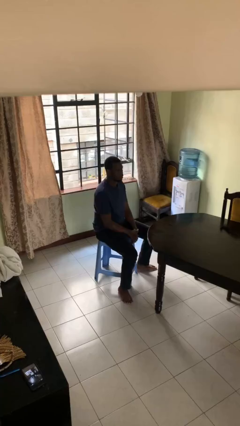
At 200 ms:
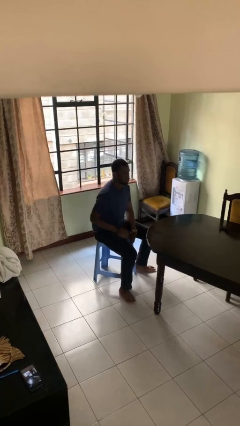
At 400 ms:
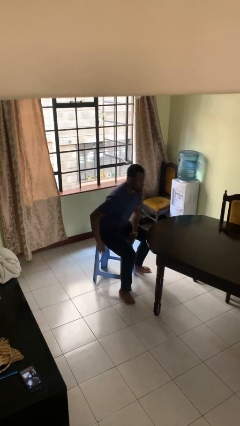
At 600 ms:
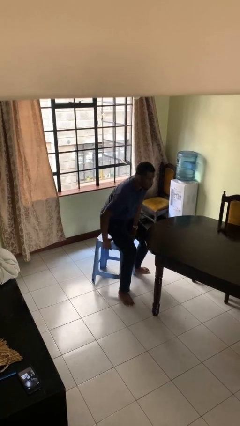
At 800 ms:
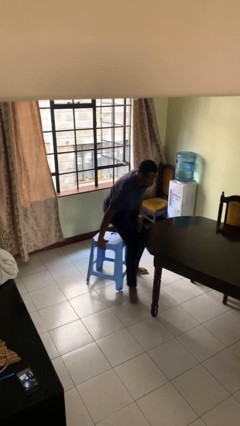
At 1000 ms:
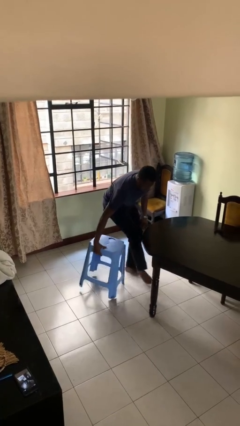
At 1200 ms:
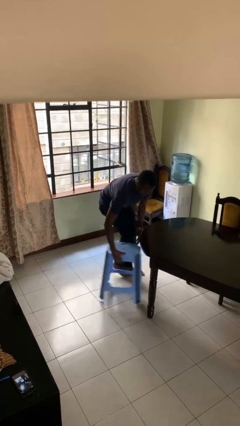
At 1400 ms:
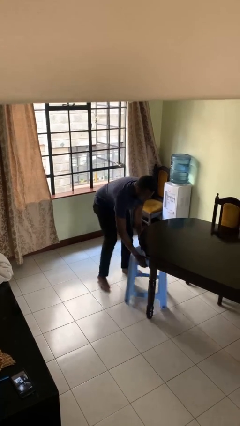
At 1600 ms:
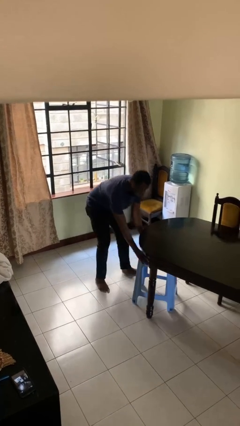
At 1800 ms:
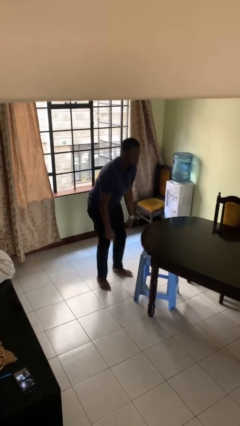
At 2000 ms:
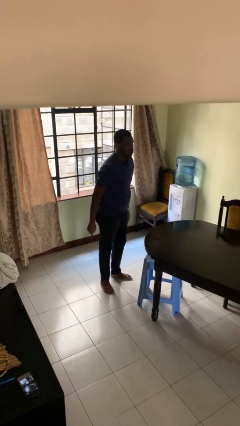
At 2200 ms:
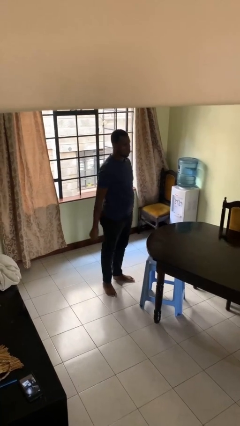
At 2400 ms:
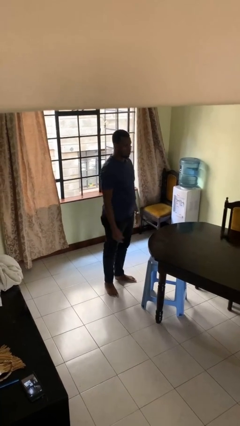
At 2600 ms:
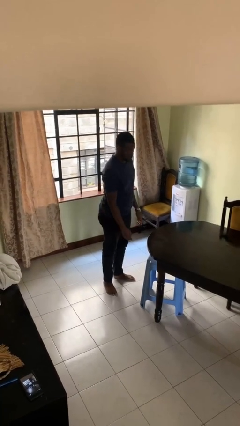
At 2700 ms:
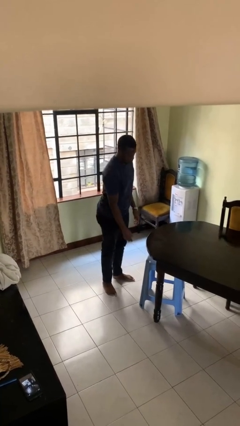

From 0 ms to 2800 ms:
person stands up

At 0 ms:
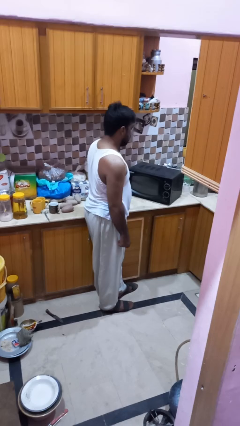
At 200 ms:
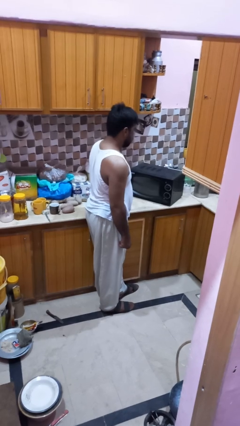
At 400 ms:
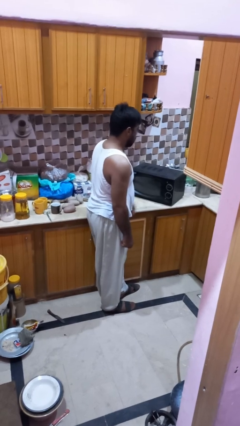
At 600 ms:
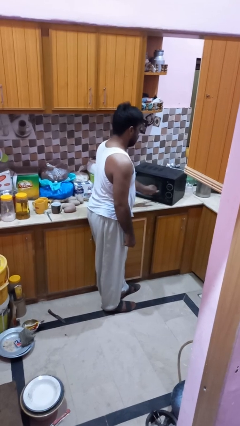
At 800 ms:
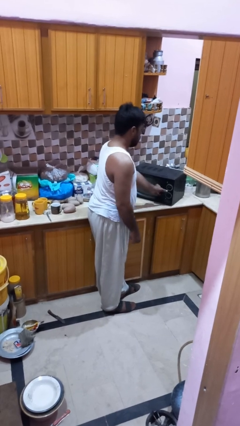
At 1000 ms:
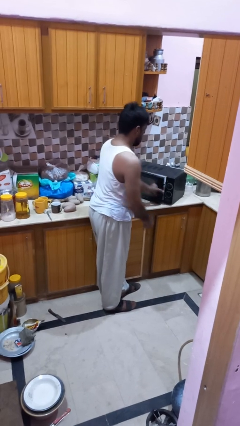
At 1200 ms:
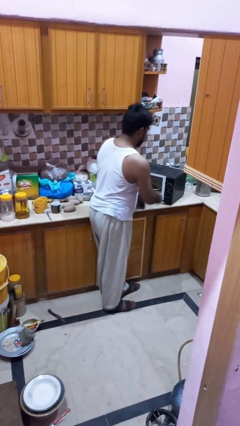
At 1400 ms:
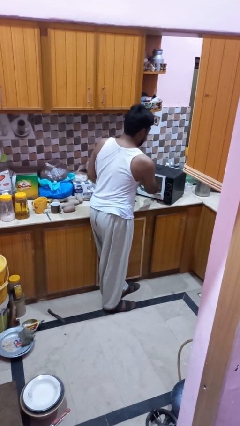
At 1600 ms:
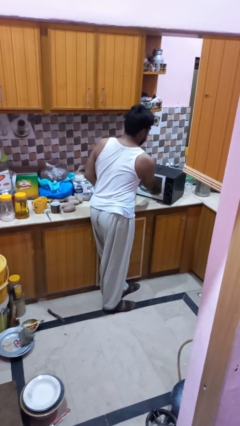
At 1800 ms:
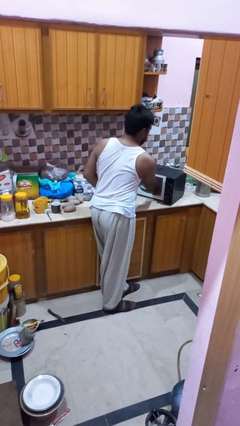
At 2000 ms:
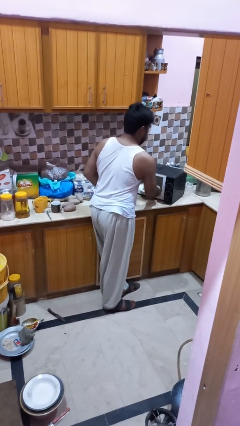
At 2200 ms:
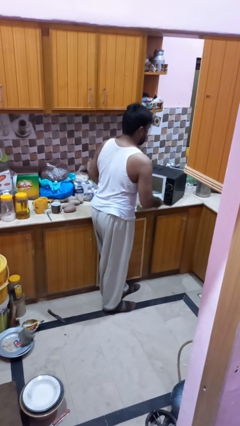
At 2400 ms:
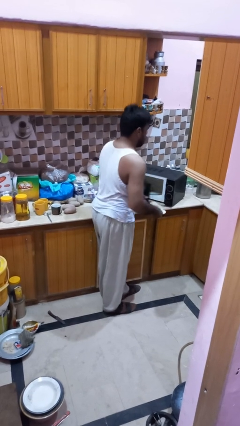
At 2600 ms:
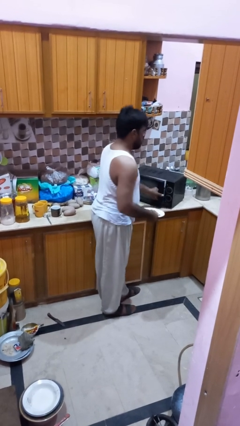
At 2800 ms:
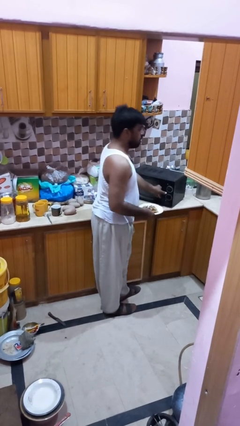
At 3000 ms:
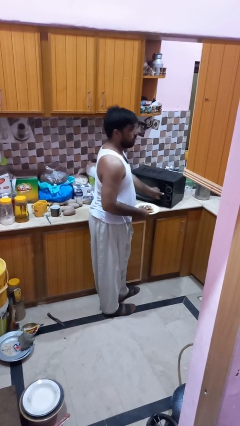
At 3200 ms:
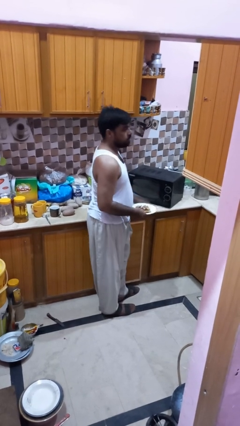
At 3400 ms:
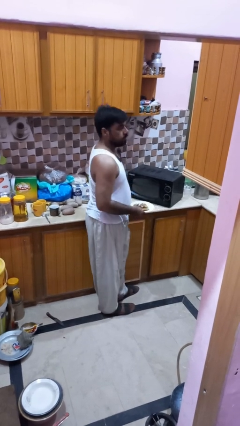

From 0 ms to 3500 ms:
person takes object from microwave

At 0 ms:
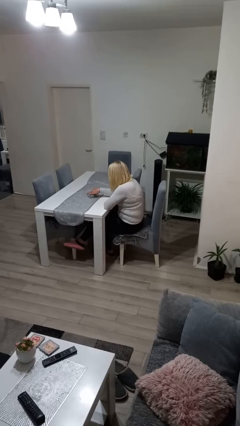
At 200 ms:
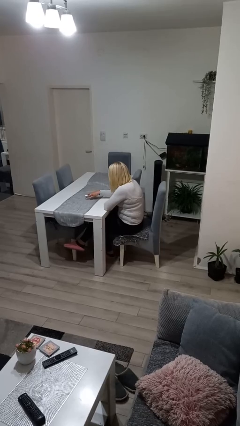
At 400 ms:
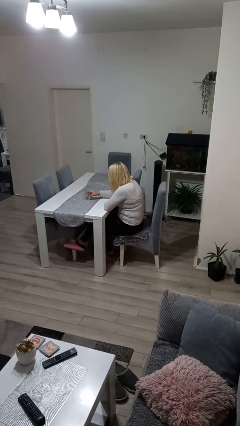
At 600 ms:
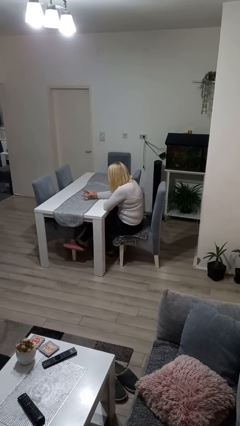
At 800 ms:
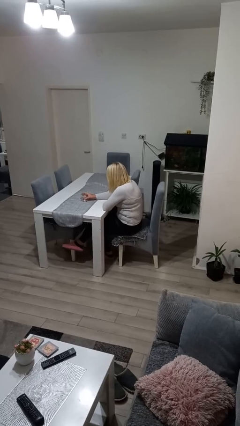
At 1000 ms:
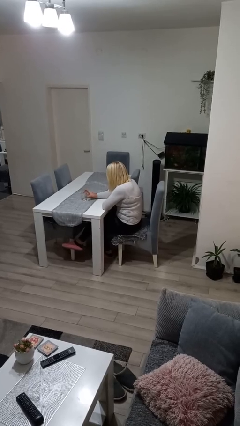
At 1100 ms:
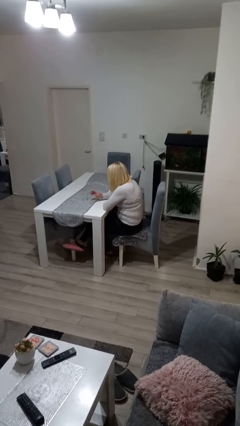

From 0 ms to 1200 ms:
person sets upright glass

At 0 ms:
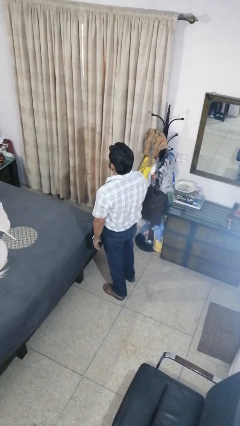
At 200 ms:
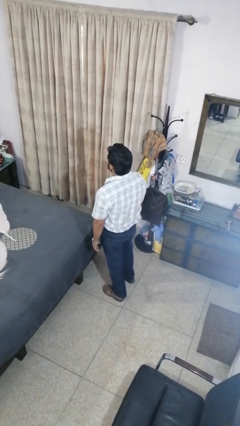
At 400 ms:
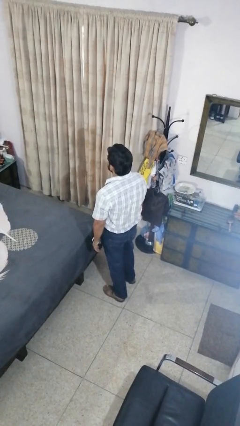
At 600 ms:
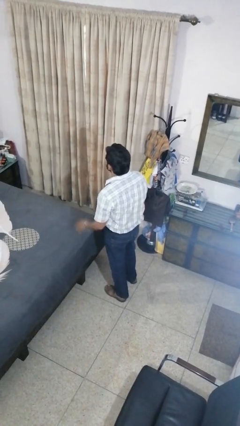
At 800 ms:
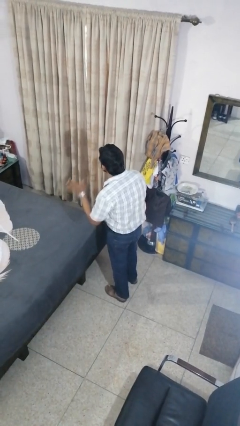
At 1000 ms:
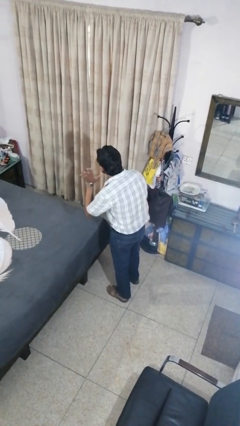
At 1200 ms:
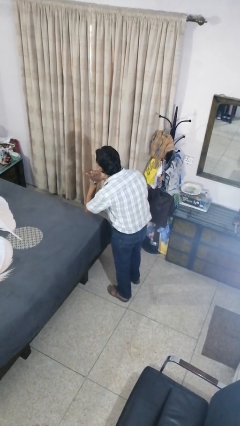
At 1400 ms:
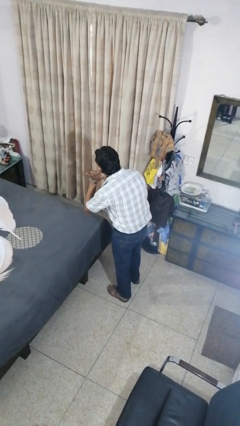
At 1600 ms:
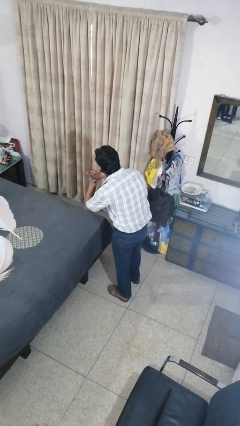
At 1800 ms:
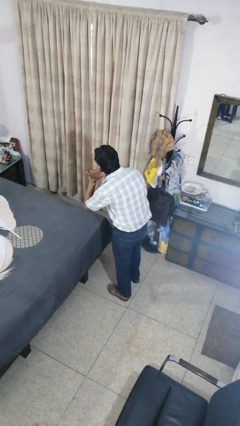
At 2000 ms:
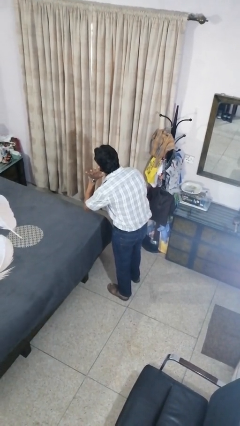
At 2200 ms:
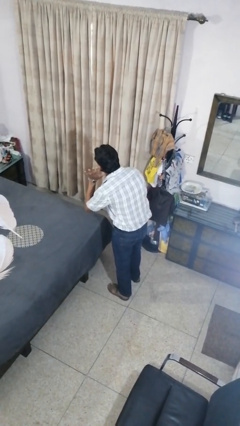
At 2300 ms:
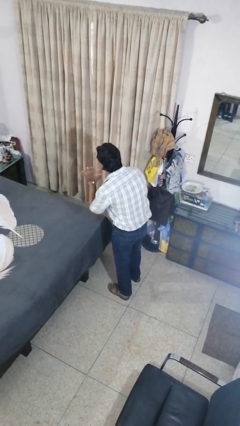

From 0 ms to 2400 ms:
person gestures listen closely

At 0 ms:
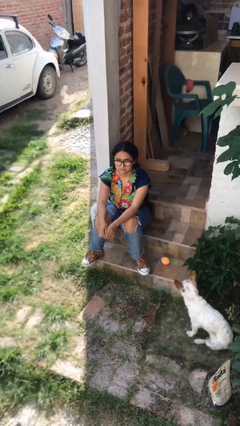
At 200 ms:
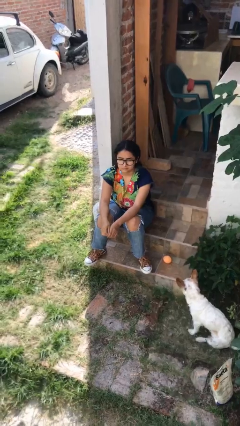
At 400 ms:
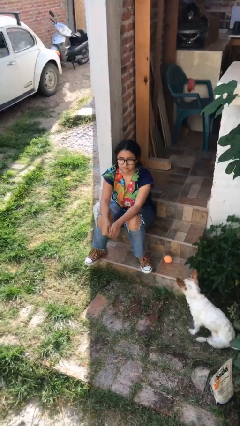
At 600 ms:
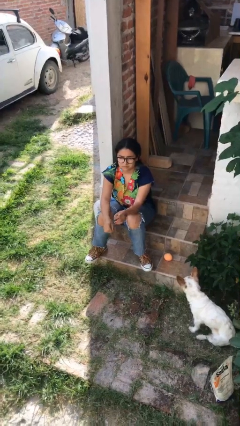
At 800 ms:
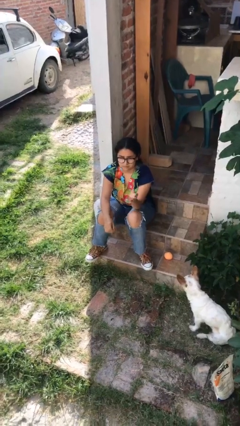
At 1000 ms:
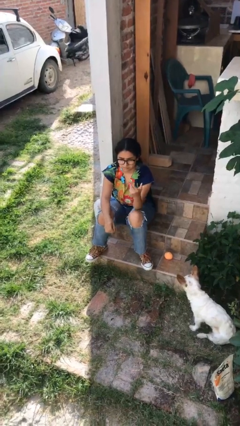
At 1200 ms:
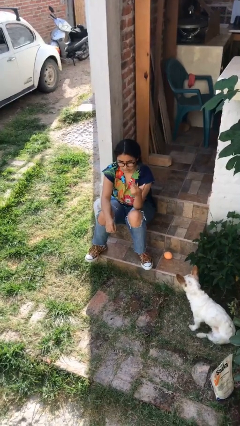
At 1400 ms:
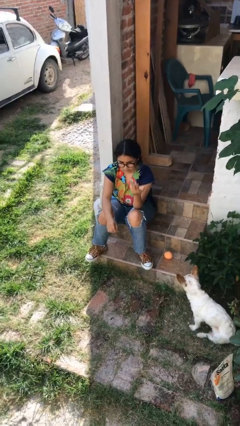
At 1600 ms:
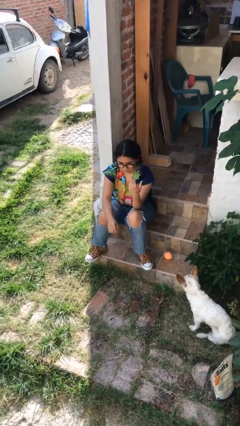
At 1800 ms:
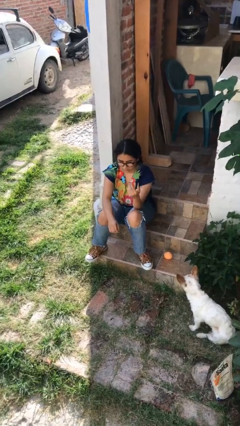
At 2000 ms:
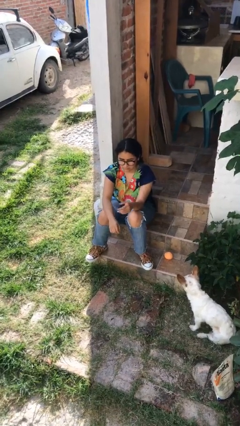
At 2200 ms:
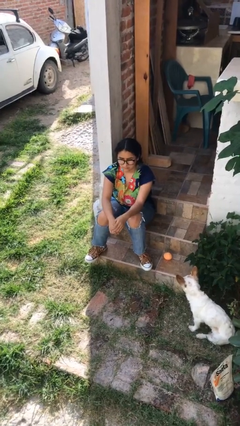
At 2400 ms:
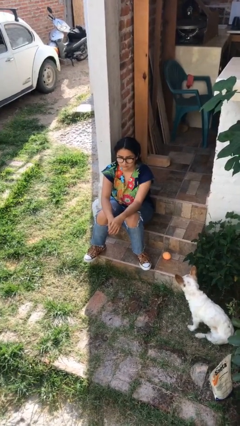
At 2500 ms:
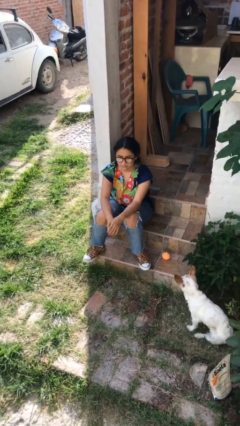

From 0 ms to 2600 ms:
person gestures come here

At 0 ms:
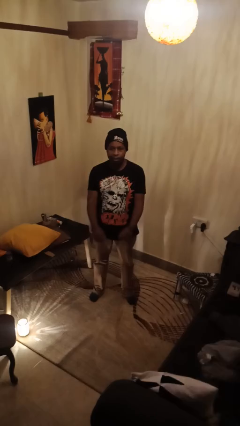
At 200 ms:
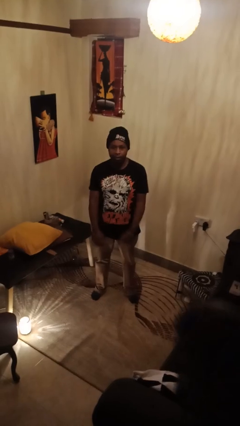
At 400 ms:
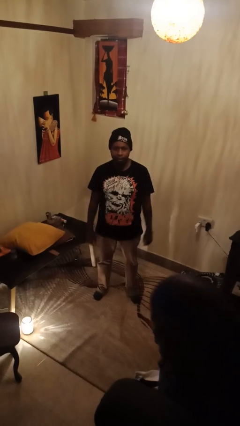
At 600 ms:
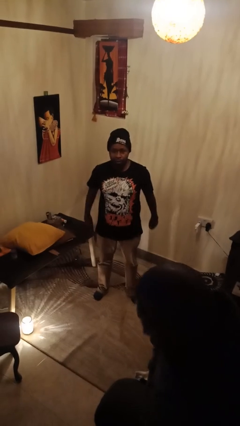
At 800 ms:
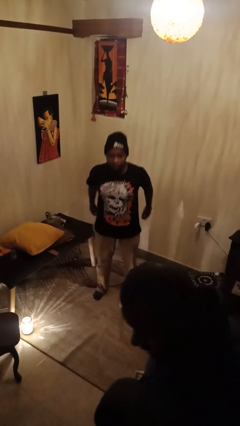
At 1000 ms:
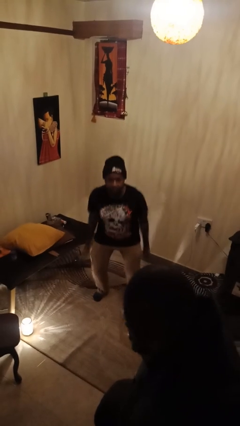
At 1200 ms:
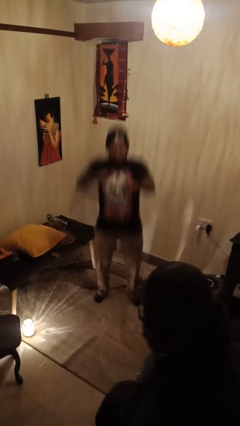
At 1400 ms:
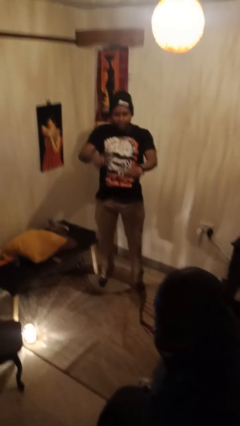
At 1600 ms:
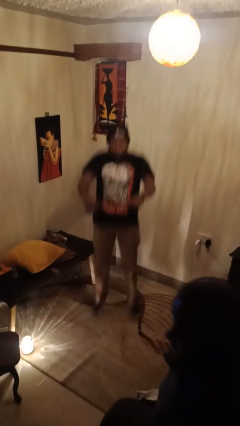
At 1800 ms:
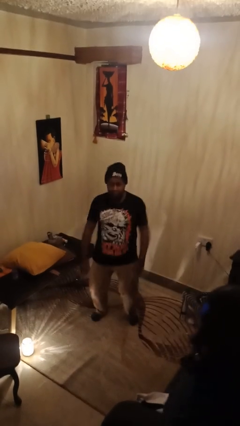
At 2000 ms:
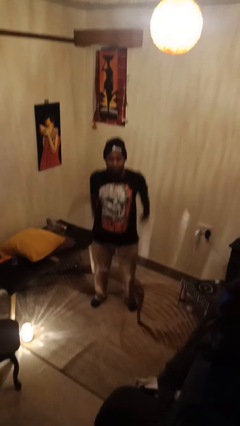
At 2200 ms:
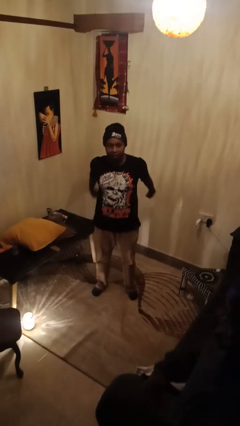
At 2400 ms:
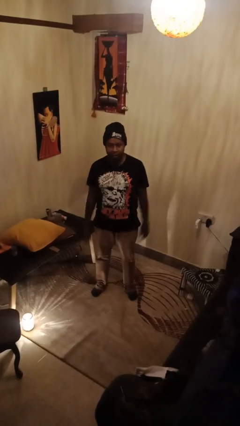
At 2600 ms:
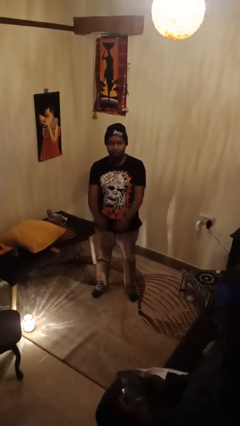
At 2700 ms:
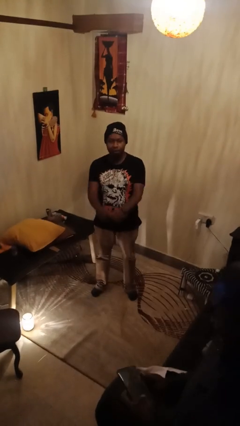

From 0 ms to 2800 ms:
person jumps

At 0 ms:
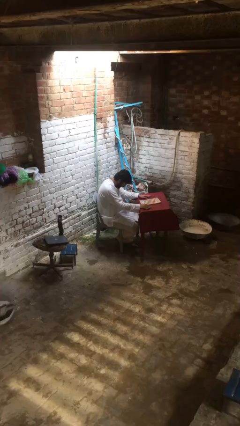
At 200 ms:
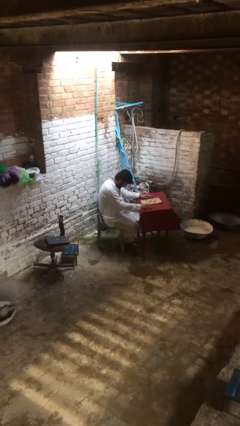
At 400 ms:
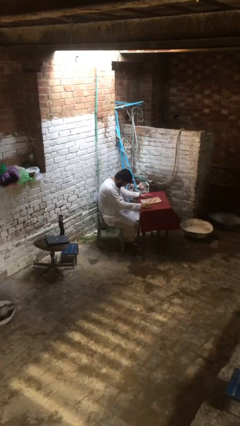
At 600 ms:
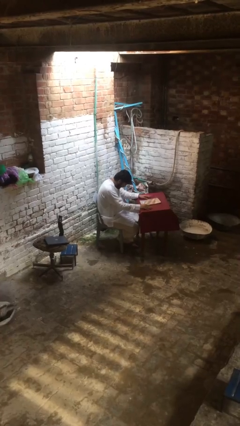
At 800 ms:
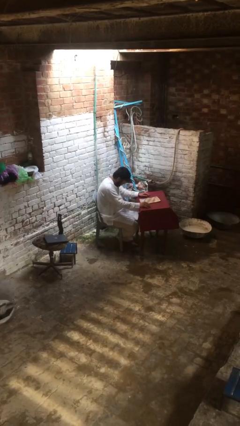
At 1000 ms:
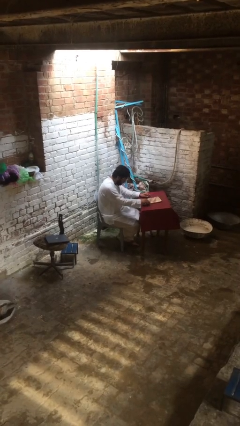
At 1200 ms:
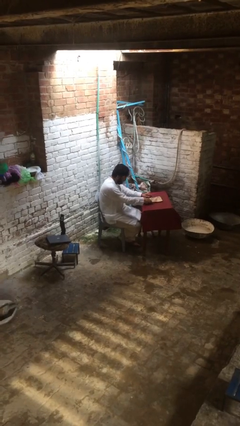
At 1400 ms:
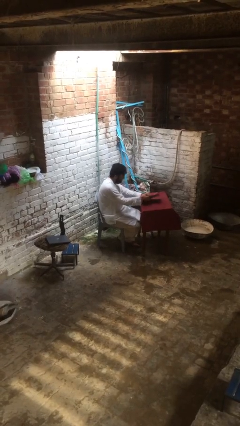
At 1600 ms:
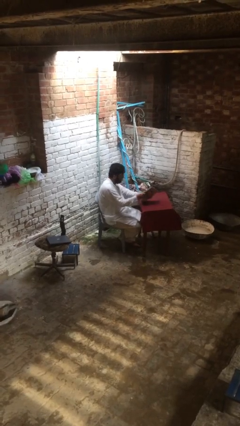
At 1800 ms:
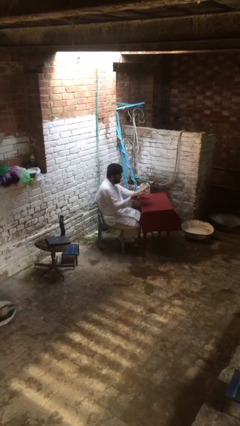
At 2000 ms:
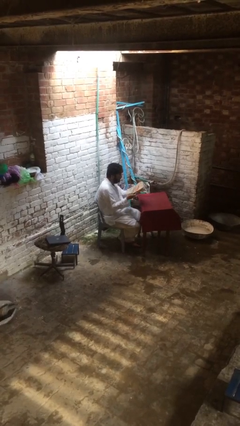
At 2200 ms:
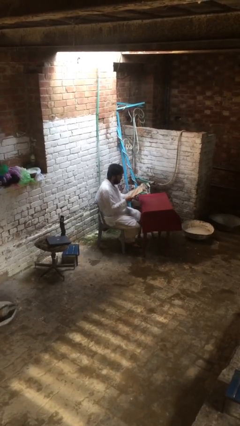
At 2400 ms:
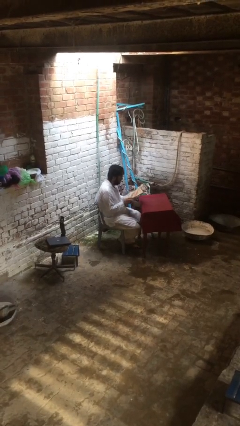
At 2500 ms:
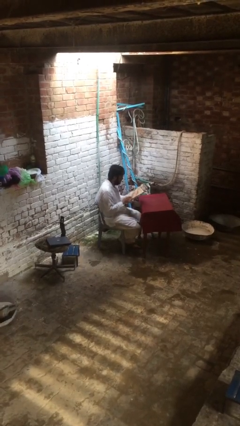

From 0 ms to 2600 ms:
person picks up object from table
